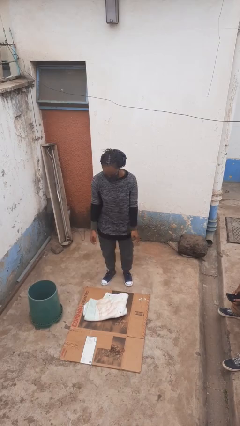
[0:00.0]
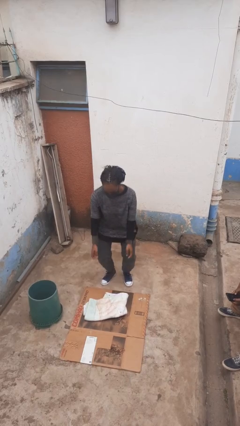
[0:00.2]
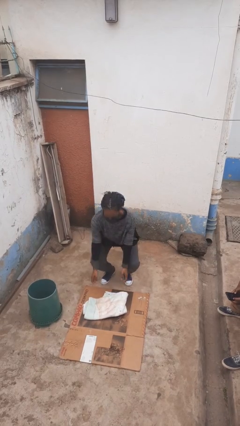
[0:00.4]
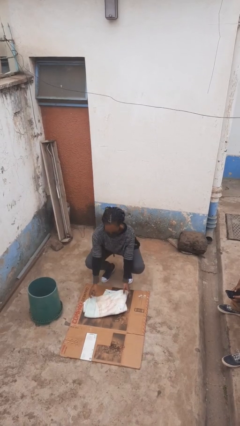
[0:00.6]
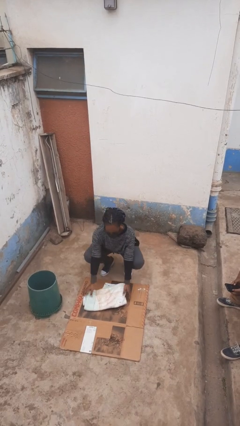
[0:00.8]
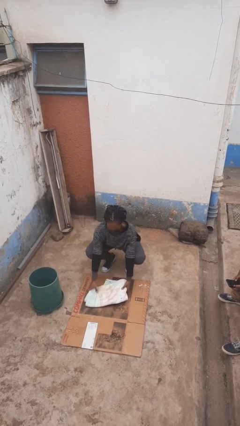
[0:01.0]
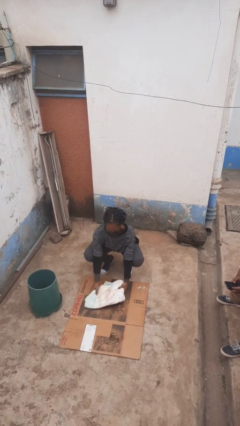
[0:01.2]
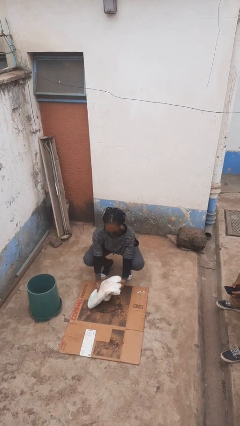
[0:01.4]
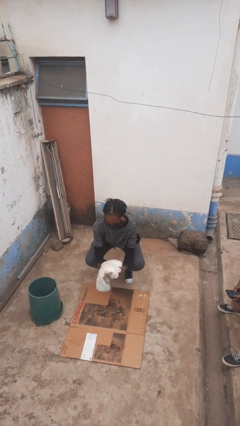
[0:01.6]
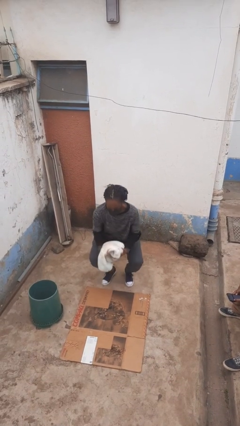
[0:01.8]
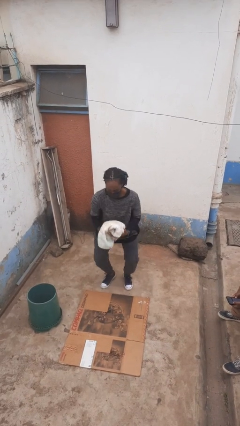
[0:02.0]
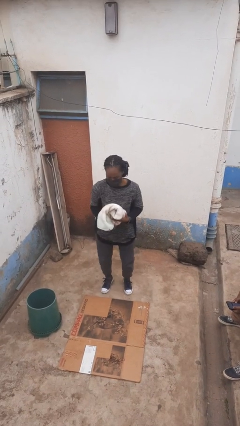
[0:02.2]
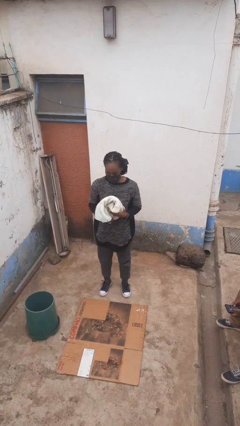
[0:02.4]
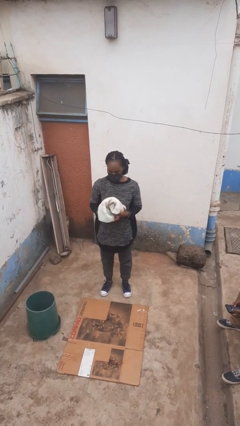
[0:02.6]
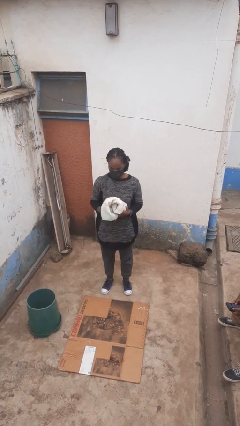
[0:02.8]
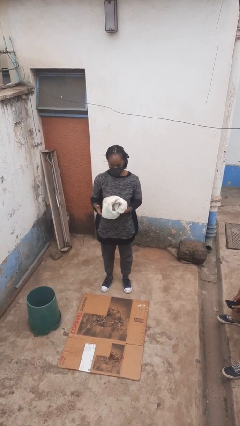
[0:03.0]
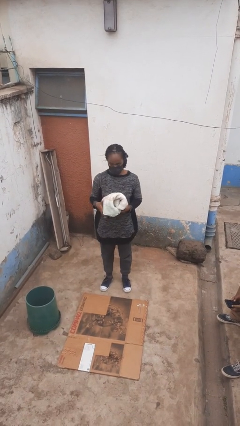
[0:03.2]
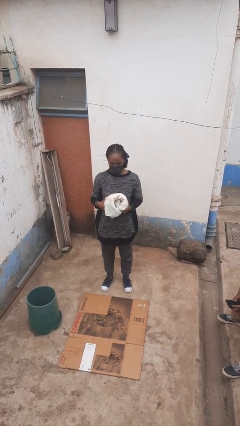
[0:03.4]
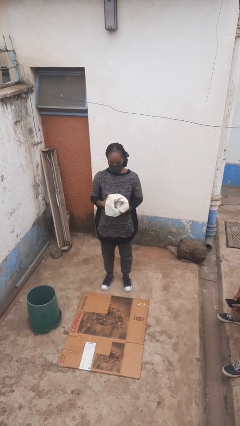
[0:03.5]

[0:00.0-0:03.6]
person picks up object from floor

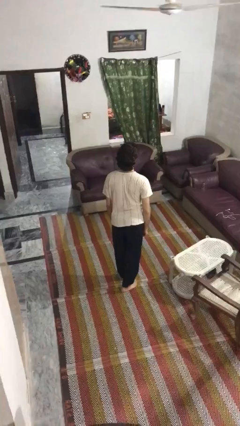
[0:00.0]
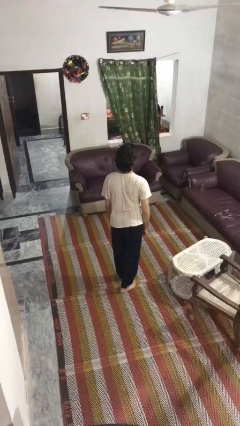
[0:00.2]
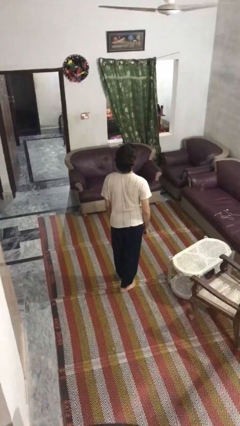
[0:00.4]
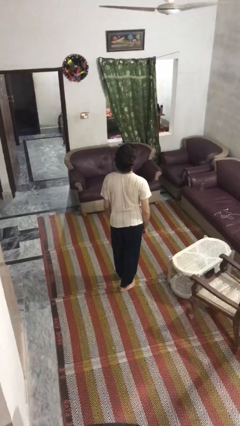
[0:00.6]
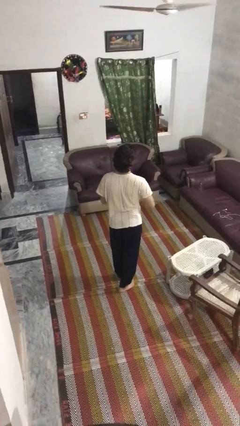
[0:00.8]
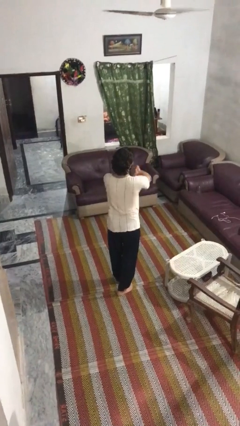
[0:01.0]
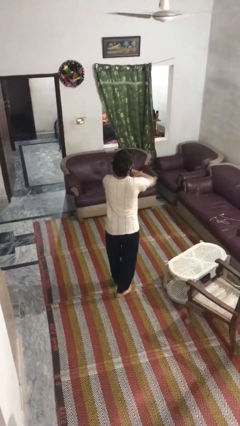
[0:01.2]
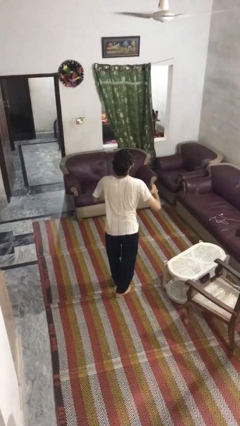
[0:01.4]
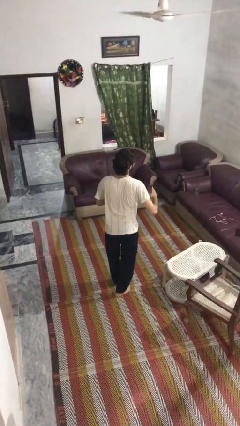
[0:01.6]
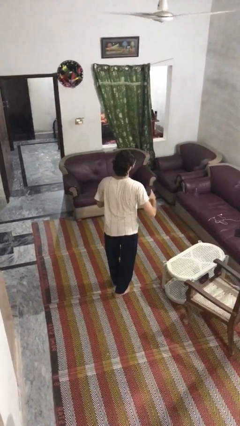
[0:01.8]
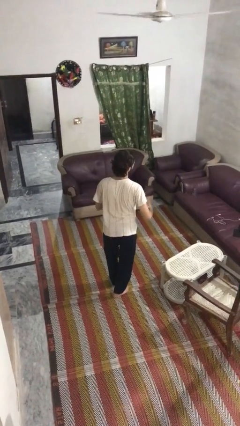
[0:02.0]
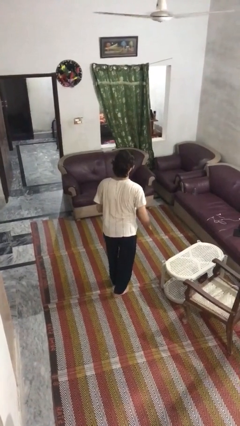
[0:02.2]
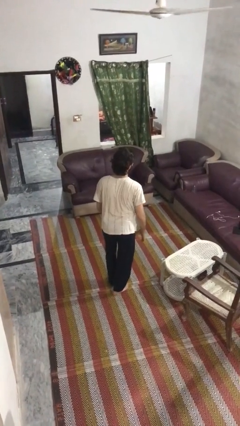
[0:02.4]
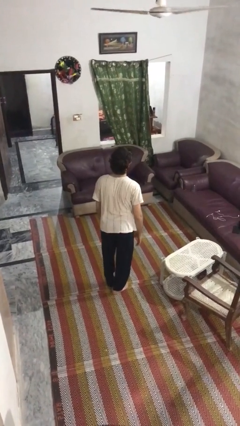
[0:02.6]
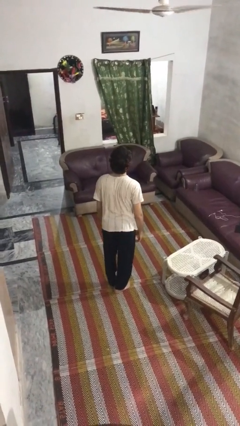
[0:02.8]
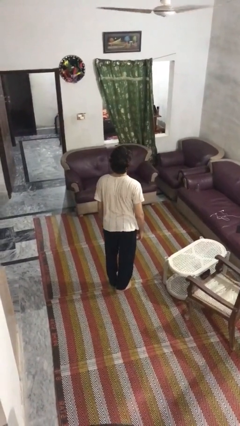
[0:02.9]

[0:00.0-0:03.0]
person karate chop

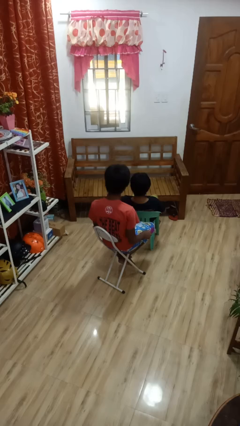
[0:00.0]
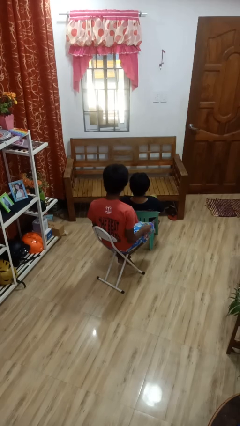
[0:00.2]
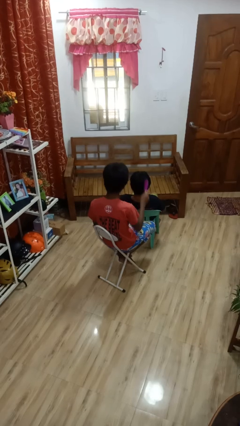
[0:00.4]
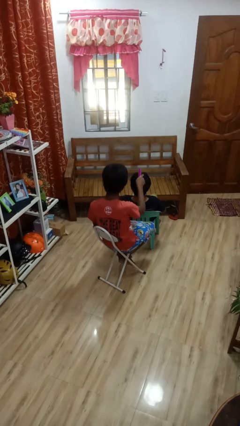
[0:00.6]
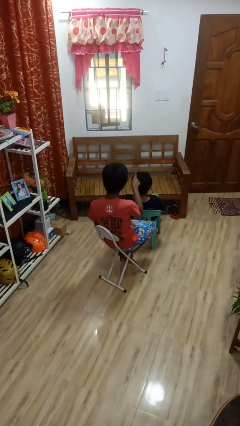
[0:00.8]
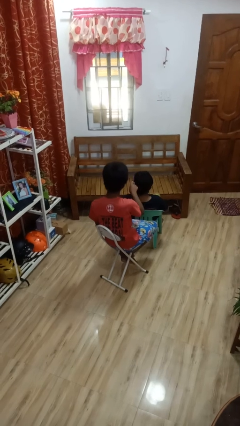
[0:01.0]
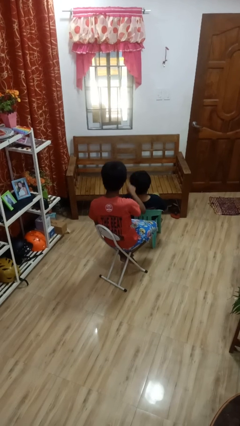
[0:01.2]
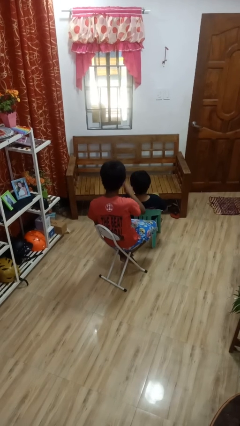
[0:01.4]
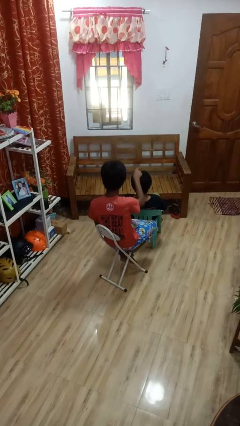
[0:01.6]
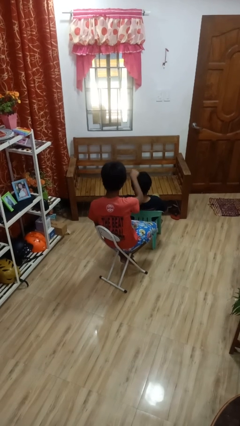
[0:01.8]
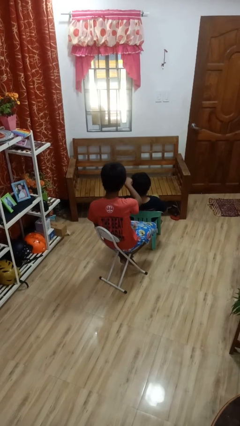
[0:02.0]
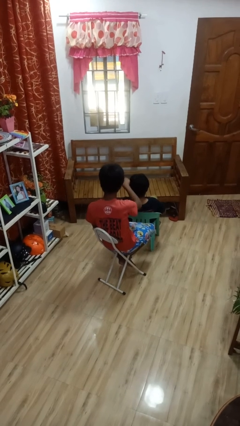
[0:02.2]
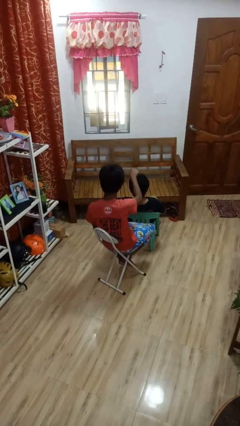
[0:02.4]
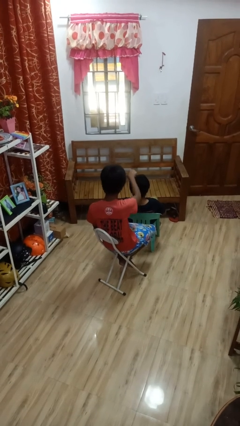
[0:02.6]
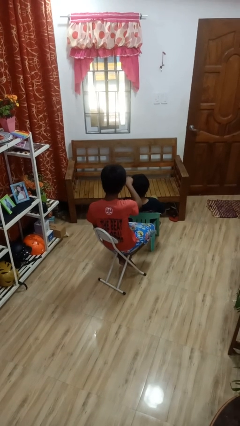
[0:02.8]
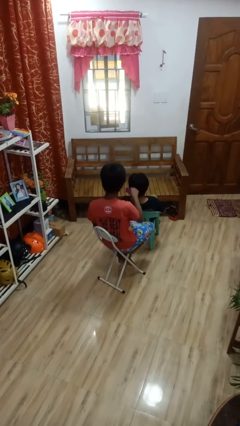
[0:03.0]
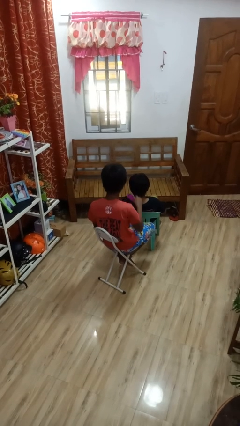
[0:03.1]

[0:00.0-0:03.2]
person brushes hair of person

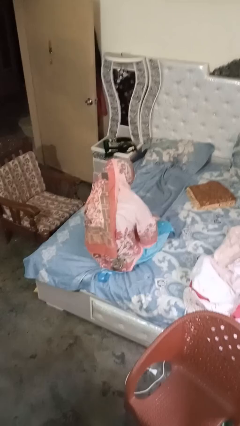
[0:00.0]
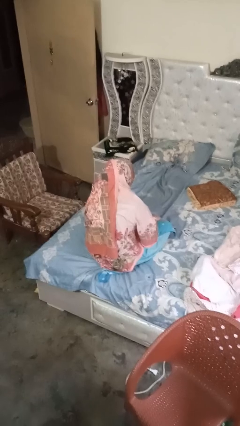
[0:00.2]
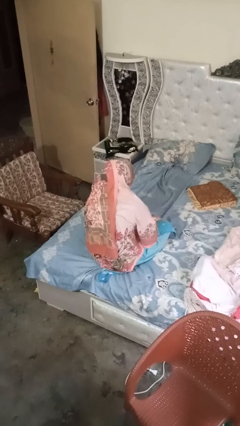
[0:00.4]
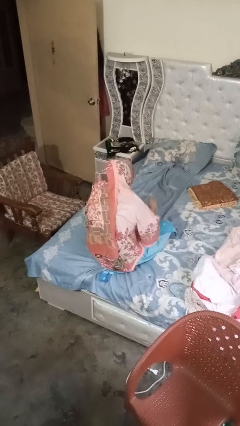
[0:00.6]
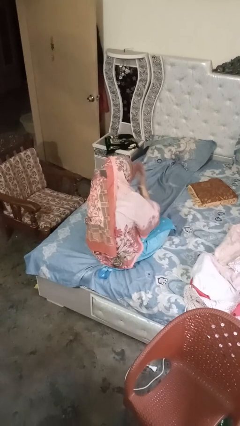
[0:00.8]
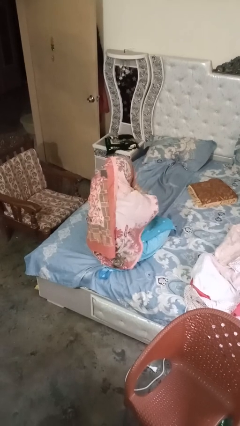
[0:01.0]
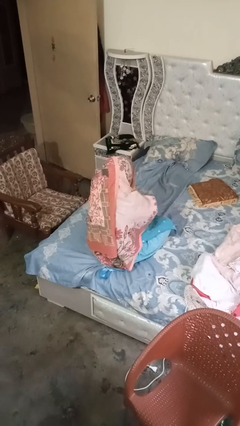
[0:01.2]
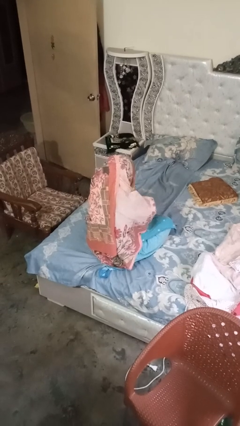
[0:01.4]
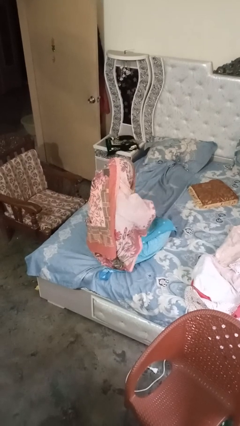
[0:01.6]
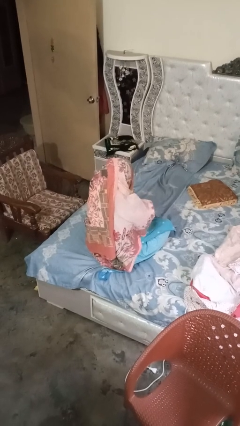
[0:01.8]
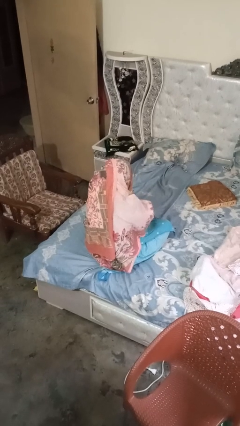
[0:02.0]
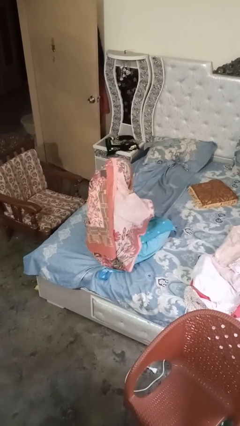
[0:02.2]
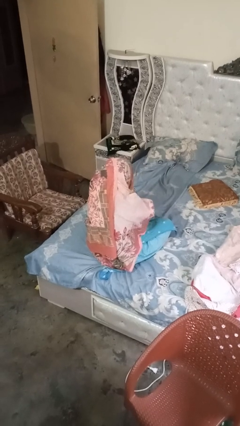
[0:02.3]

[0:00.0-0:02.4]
person covers face with hands

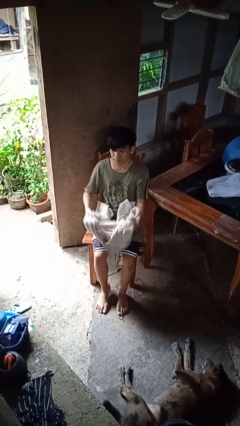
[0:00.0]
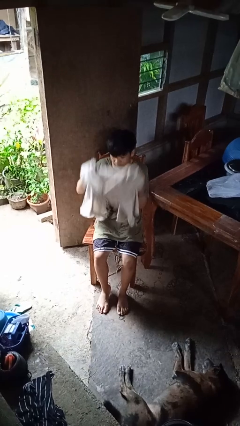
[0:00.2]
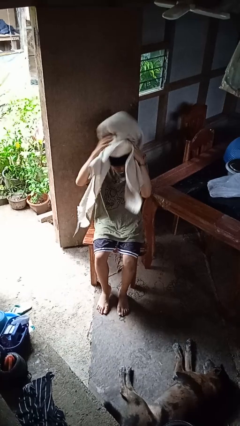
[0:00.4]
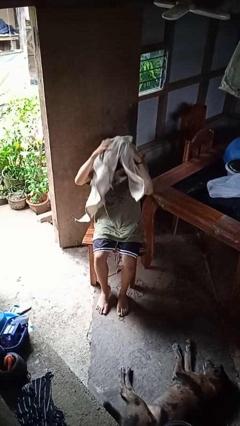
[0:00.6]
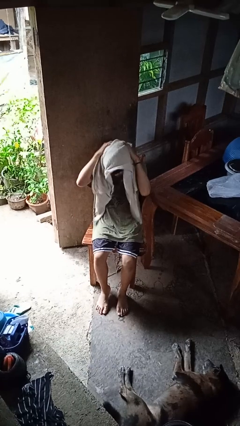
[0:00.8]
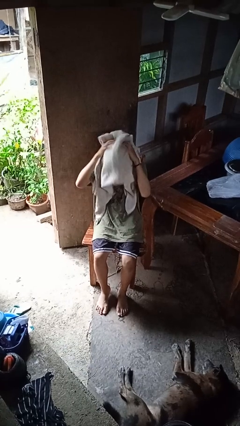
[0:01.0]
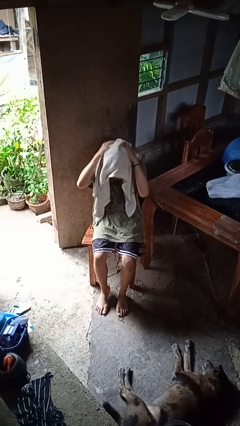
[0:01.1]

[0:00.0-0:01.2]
person dries hair with towel

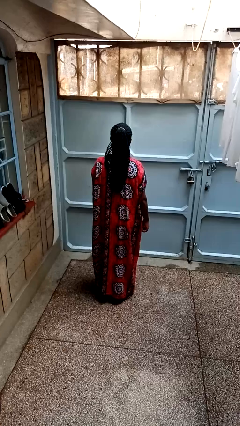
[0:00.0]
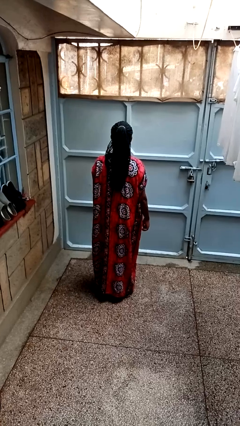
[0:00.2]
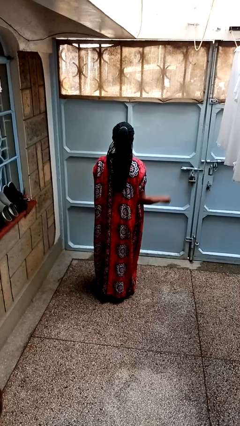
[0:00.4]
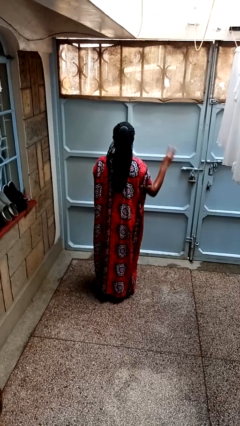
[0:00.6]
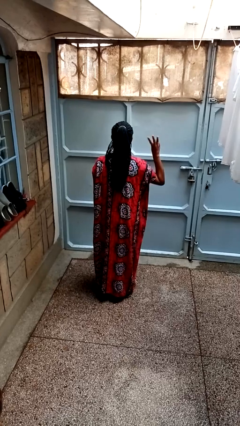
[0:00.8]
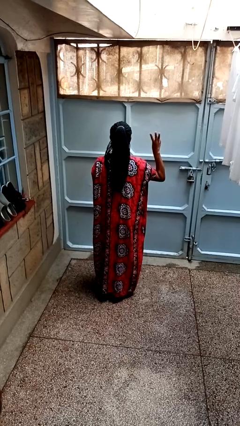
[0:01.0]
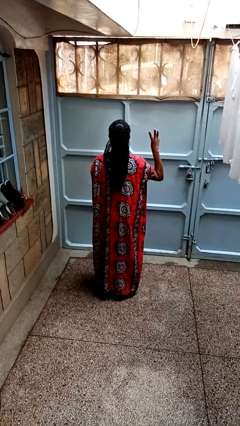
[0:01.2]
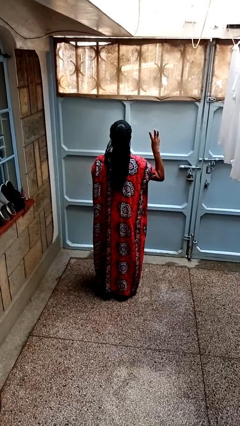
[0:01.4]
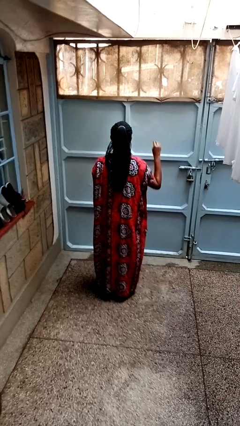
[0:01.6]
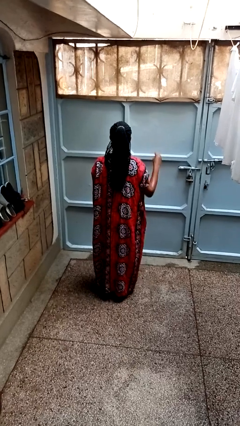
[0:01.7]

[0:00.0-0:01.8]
person gestures number three

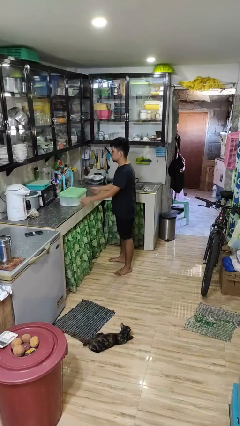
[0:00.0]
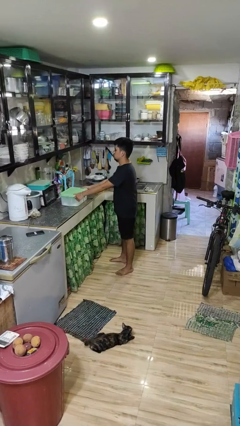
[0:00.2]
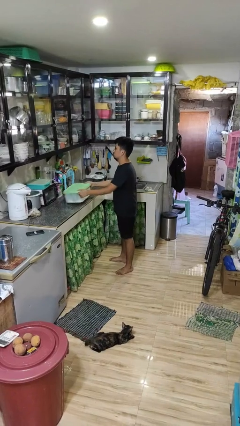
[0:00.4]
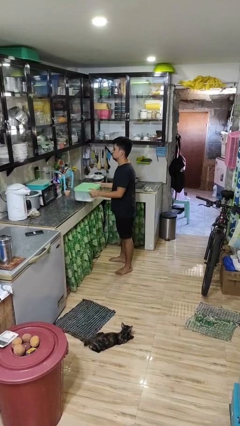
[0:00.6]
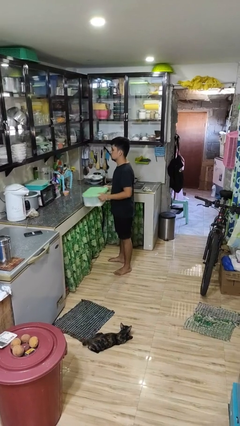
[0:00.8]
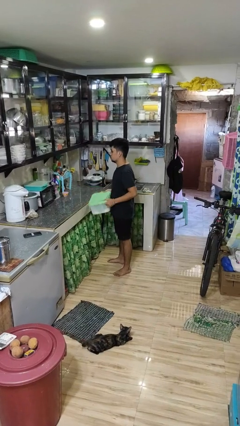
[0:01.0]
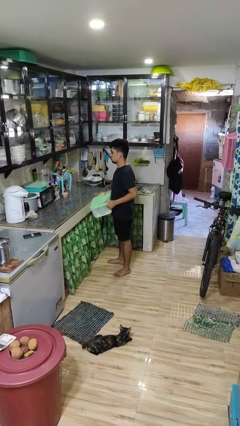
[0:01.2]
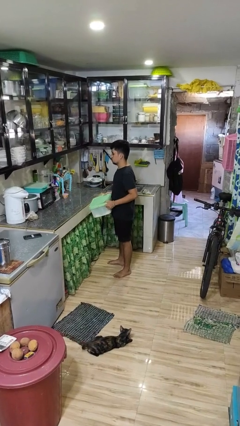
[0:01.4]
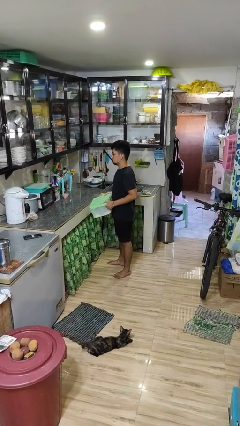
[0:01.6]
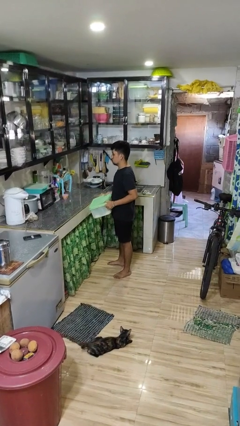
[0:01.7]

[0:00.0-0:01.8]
person picks up object from countertop
